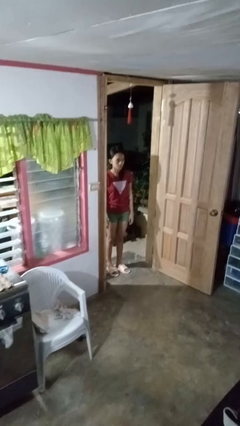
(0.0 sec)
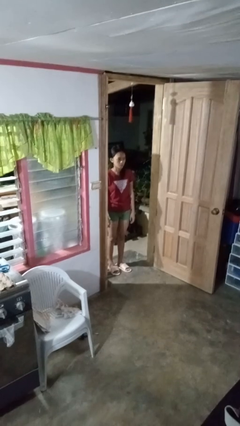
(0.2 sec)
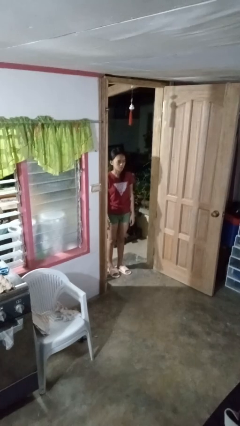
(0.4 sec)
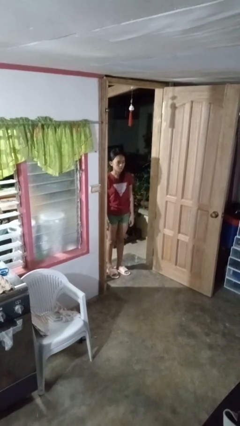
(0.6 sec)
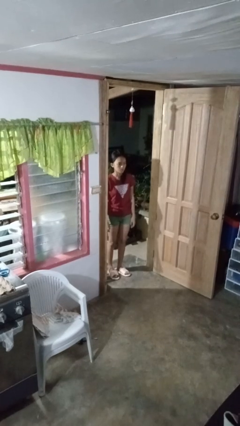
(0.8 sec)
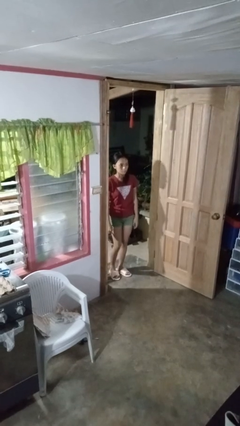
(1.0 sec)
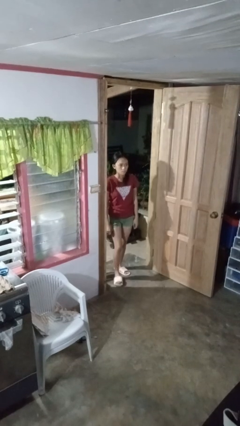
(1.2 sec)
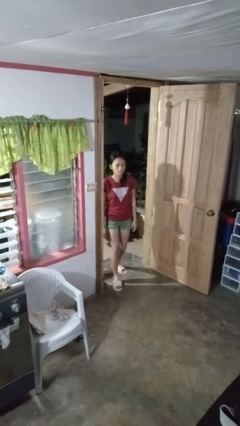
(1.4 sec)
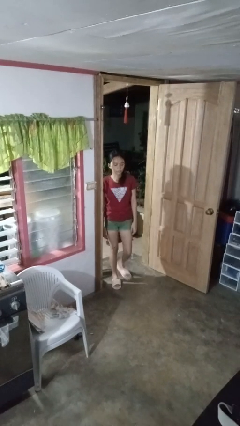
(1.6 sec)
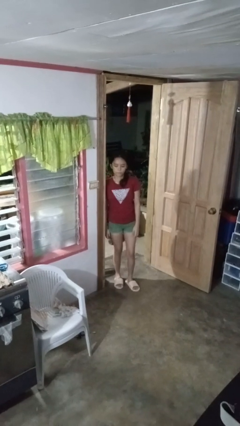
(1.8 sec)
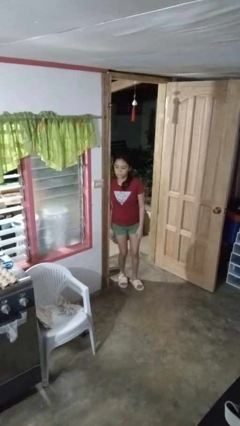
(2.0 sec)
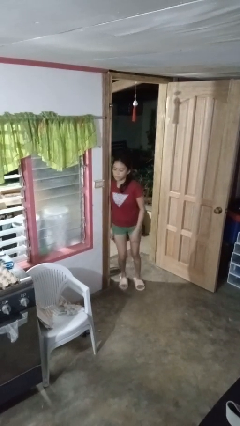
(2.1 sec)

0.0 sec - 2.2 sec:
person bumps into wall

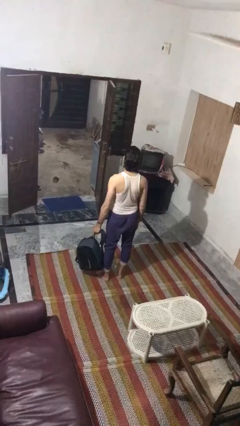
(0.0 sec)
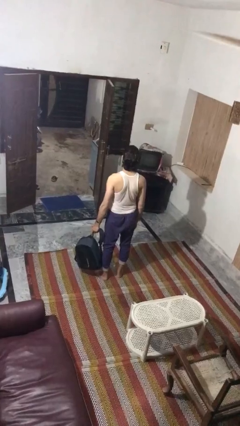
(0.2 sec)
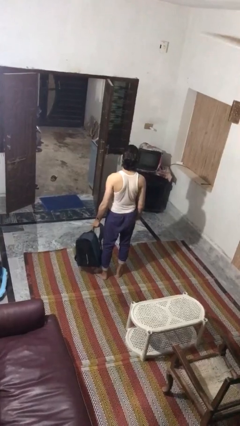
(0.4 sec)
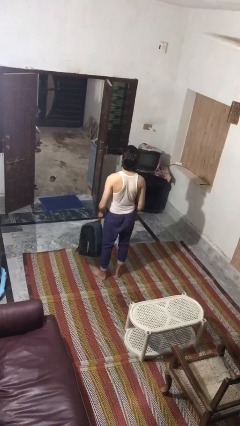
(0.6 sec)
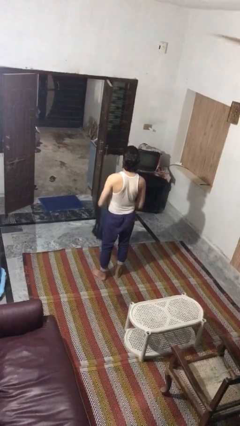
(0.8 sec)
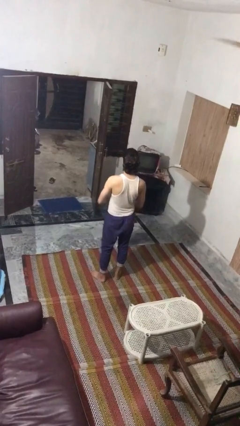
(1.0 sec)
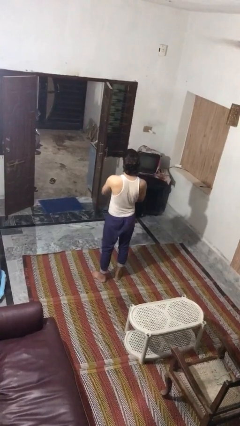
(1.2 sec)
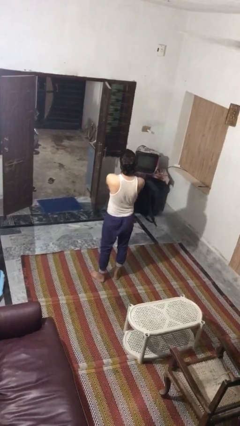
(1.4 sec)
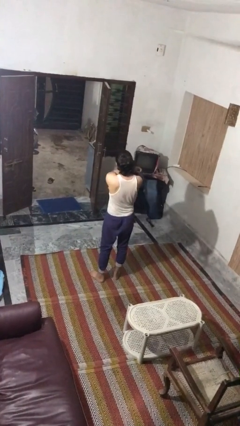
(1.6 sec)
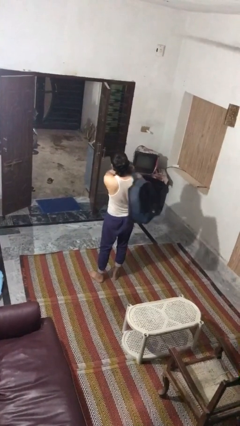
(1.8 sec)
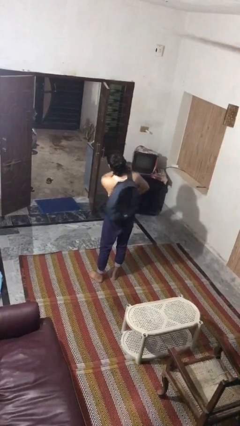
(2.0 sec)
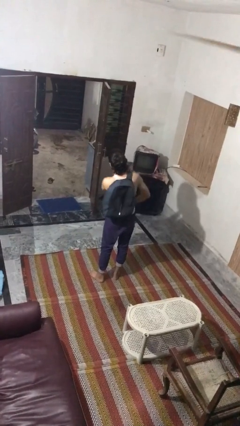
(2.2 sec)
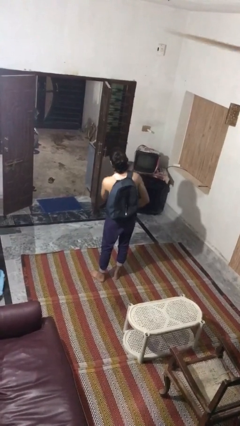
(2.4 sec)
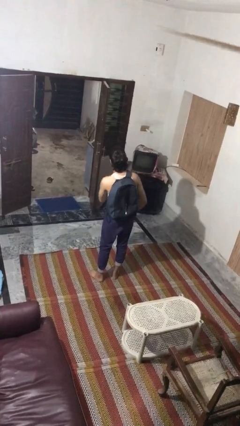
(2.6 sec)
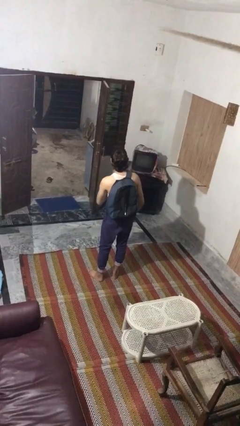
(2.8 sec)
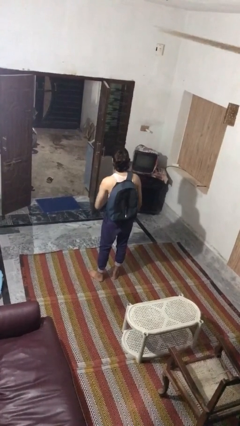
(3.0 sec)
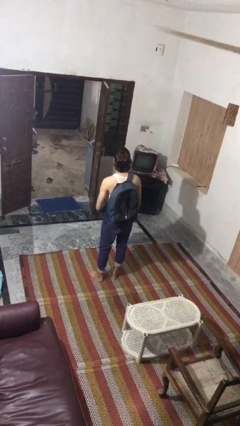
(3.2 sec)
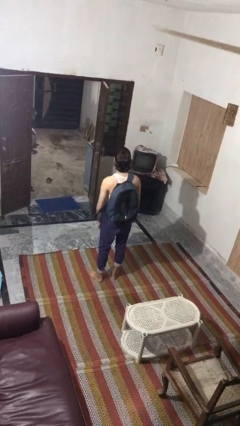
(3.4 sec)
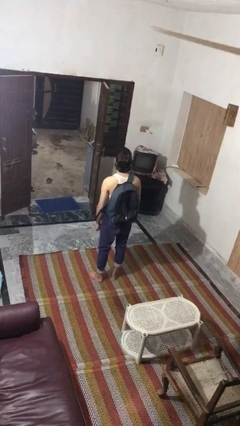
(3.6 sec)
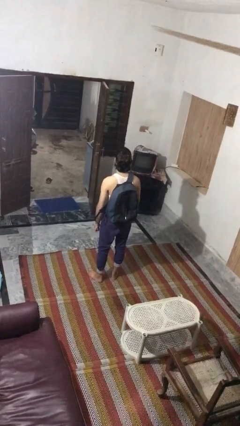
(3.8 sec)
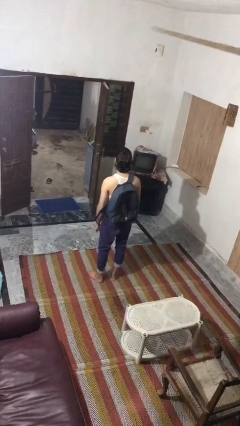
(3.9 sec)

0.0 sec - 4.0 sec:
person puts on backpack

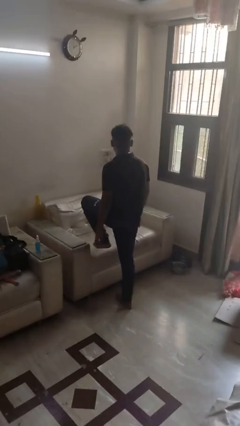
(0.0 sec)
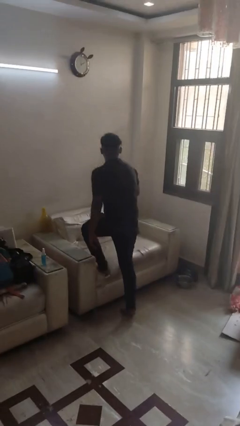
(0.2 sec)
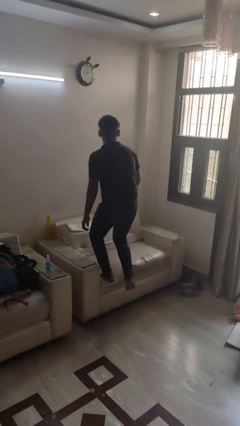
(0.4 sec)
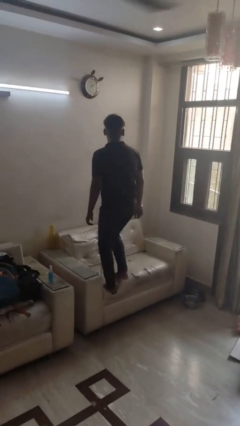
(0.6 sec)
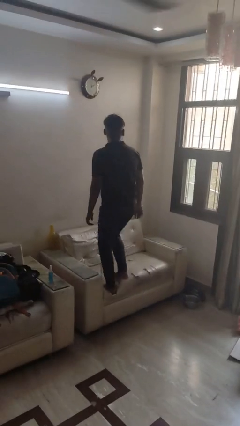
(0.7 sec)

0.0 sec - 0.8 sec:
person climbs on couch

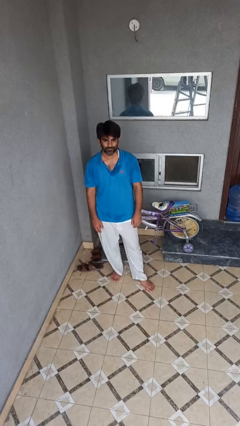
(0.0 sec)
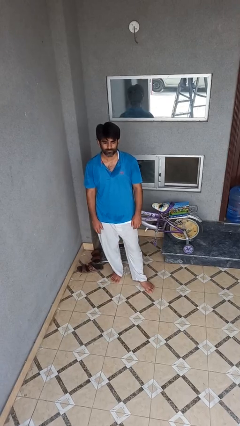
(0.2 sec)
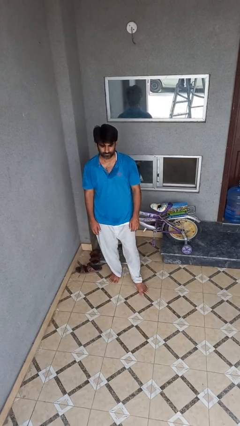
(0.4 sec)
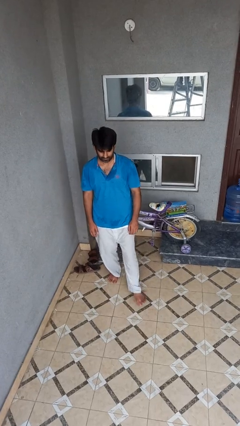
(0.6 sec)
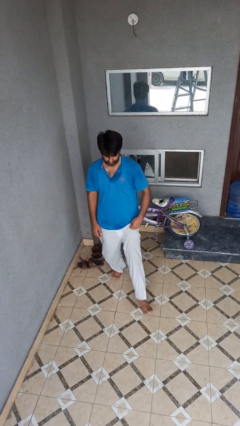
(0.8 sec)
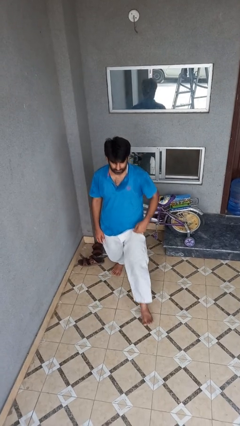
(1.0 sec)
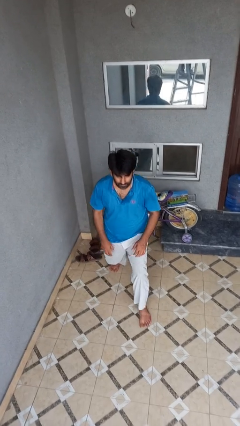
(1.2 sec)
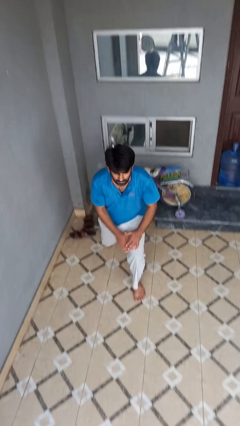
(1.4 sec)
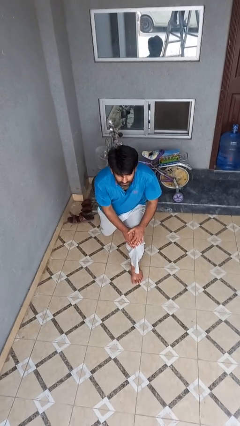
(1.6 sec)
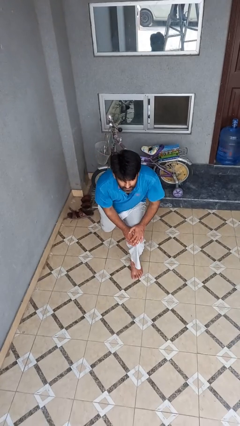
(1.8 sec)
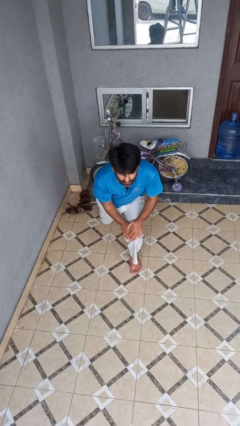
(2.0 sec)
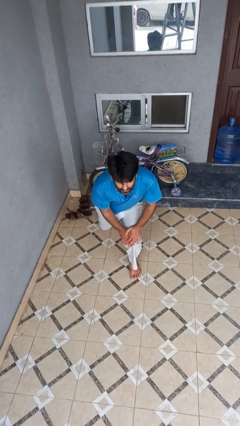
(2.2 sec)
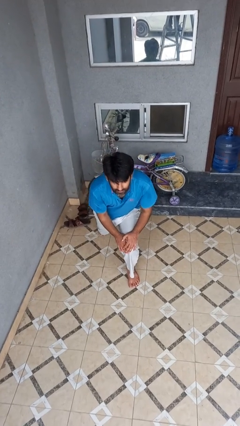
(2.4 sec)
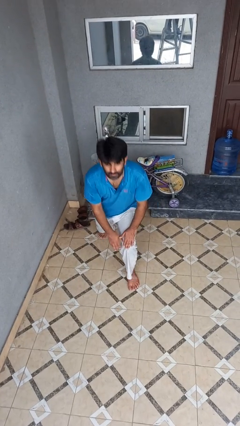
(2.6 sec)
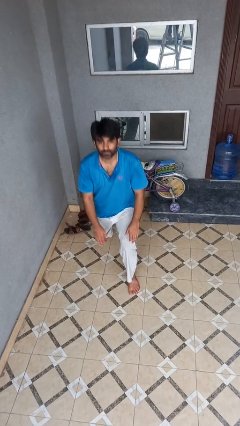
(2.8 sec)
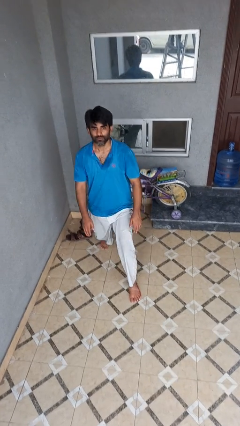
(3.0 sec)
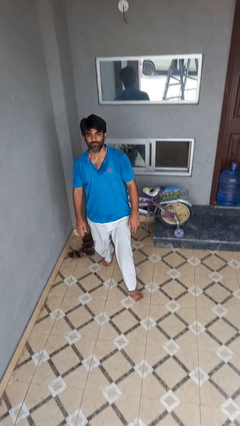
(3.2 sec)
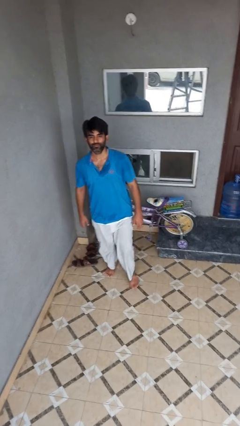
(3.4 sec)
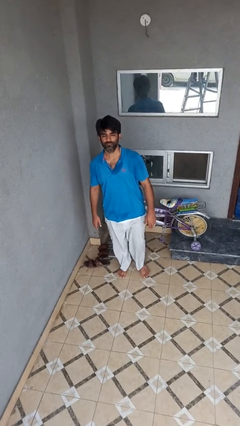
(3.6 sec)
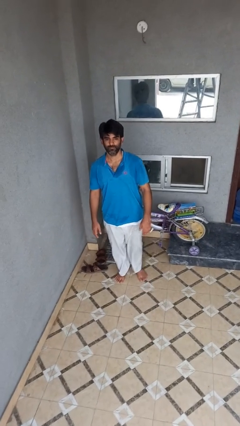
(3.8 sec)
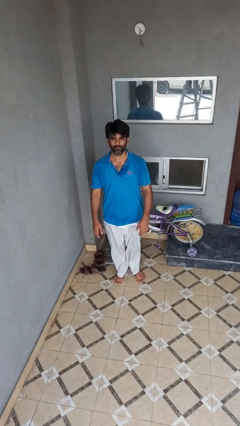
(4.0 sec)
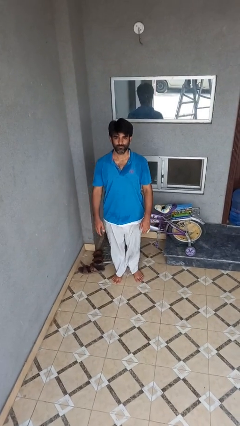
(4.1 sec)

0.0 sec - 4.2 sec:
person exercises with lunges

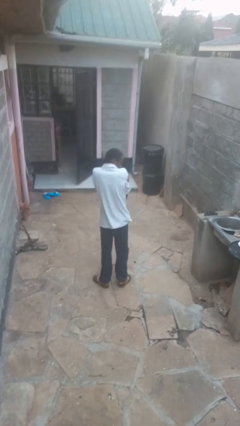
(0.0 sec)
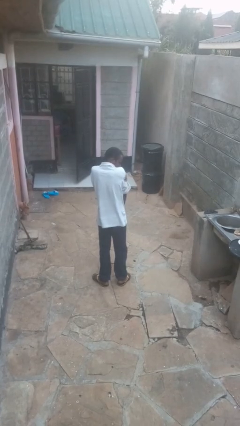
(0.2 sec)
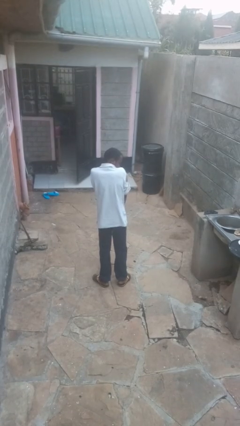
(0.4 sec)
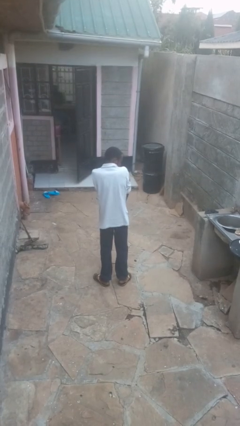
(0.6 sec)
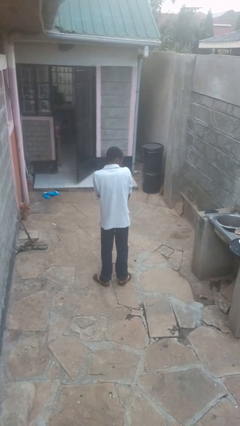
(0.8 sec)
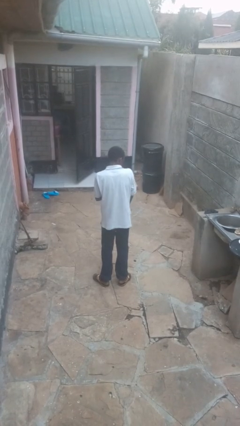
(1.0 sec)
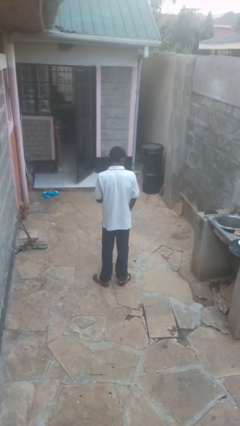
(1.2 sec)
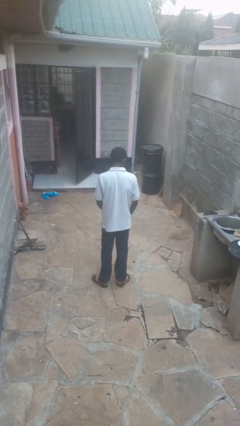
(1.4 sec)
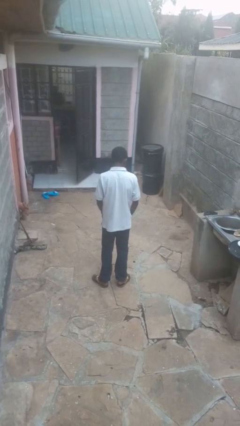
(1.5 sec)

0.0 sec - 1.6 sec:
person swats bug

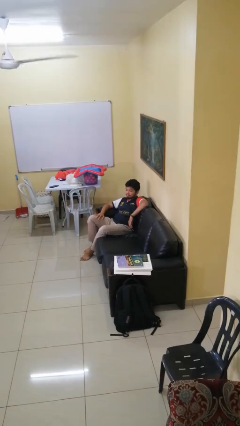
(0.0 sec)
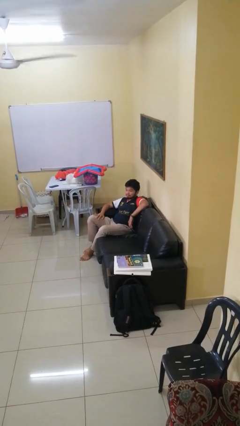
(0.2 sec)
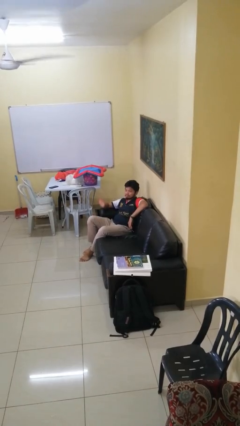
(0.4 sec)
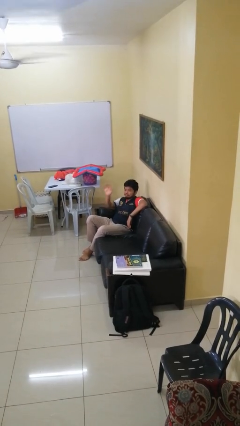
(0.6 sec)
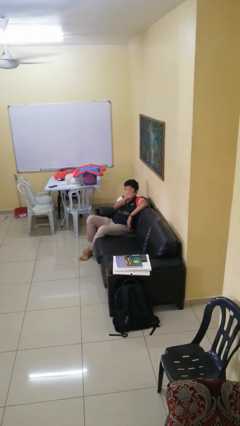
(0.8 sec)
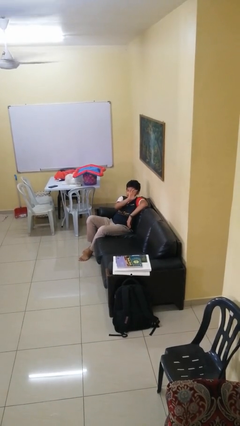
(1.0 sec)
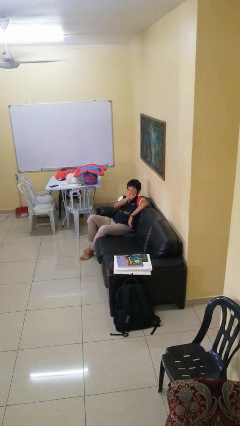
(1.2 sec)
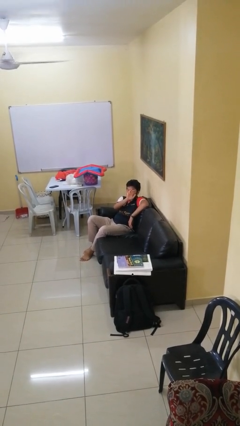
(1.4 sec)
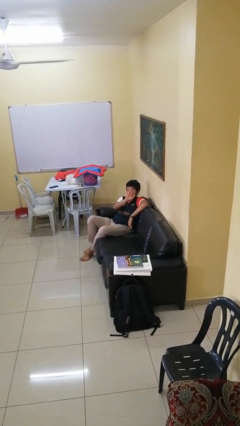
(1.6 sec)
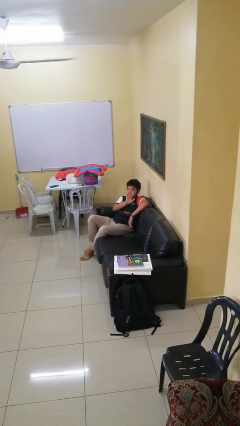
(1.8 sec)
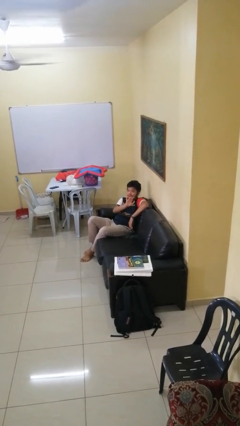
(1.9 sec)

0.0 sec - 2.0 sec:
person gestures swipe left

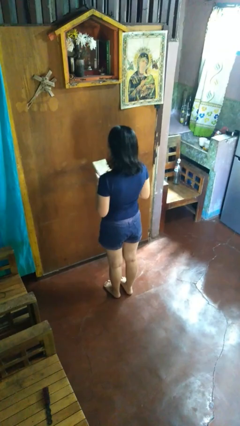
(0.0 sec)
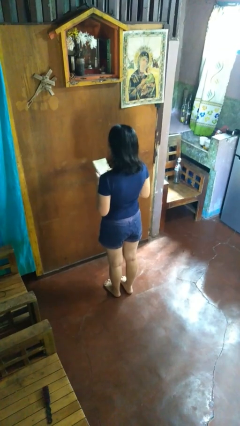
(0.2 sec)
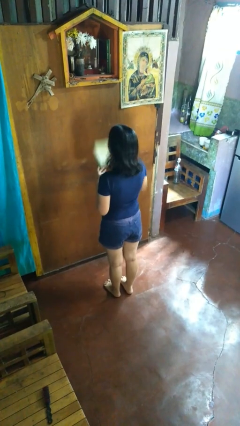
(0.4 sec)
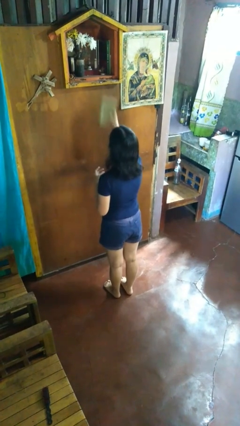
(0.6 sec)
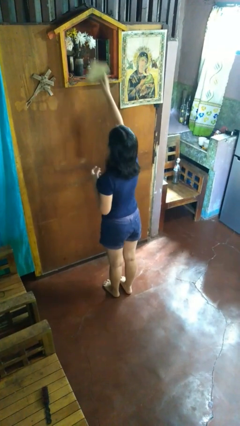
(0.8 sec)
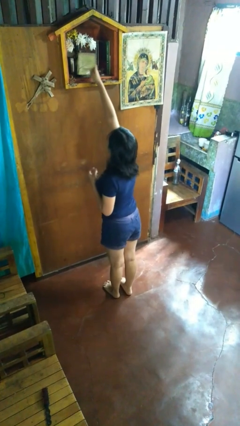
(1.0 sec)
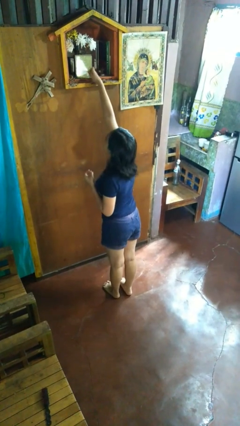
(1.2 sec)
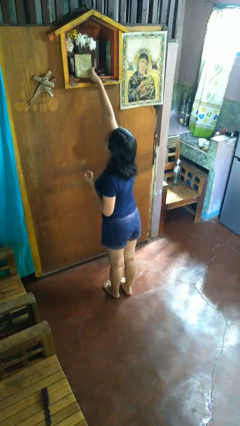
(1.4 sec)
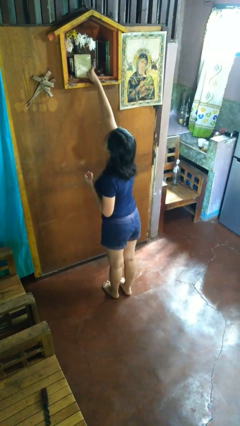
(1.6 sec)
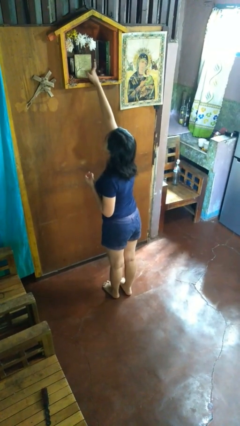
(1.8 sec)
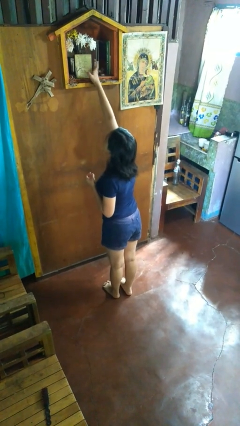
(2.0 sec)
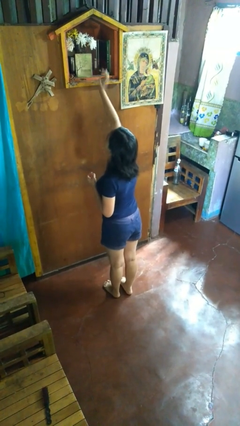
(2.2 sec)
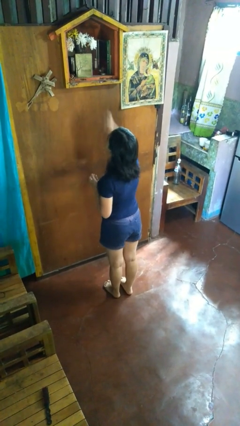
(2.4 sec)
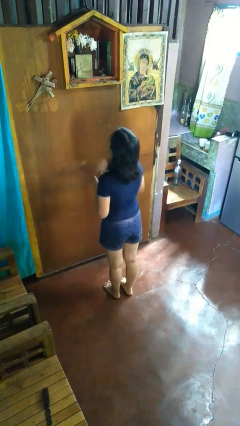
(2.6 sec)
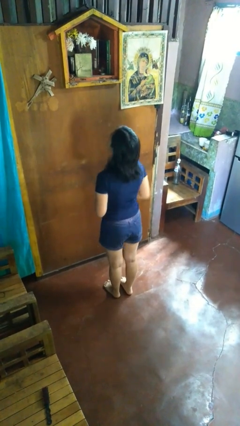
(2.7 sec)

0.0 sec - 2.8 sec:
person puts down object on shelf
